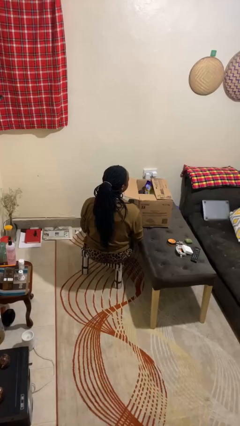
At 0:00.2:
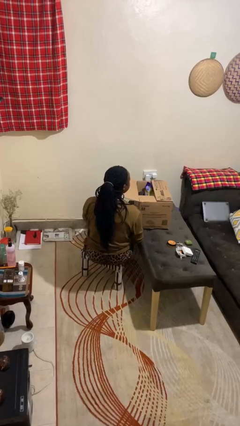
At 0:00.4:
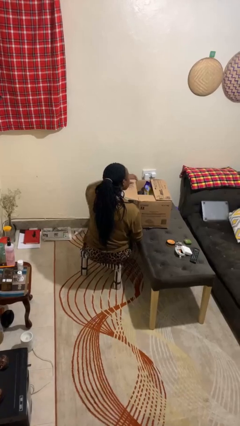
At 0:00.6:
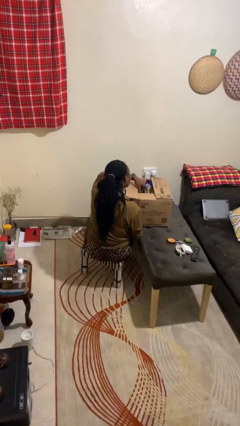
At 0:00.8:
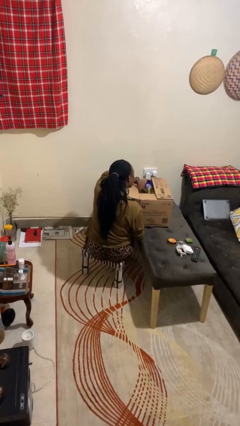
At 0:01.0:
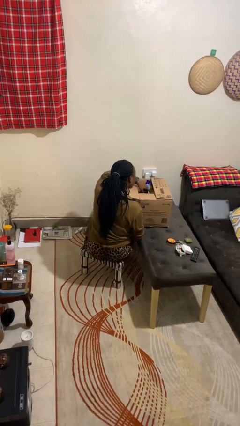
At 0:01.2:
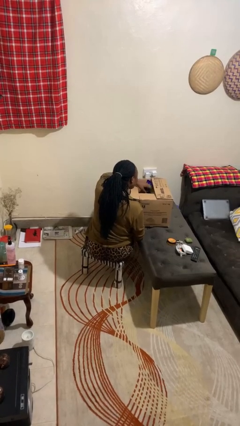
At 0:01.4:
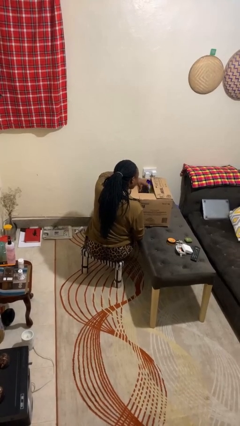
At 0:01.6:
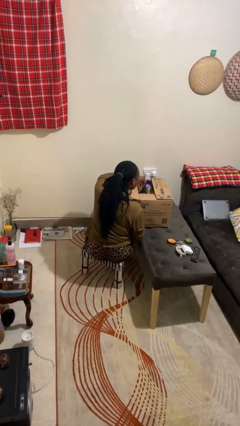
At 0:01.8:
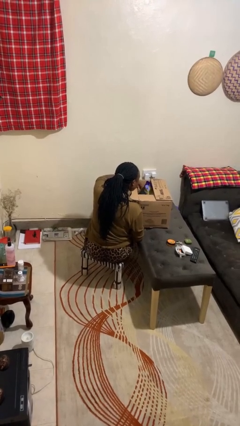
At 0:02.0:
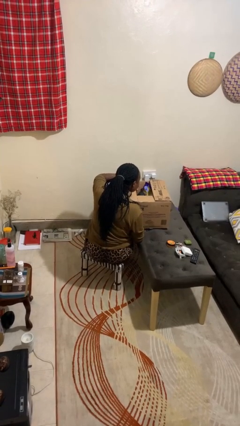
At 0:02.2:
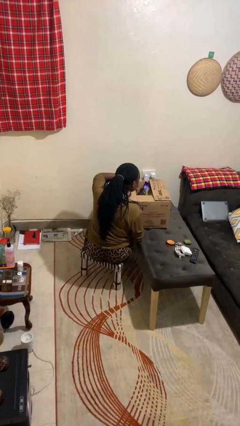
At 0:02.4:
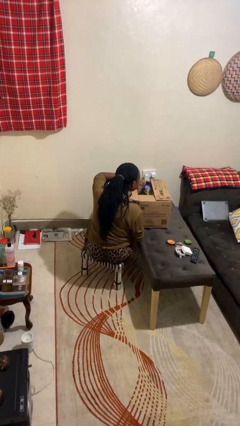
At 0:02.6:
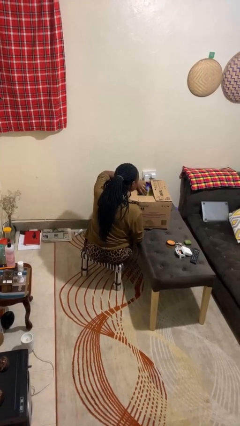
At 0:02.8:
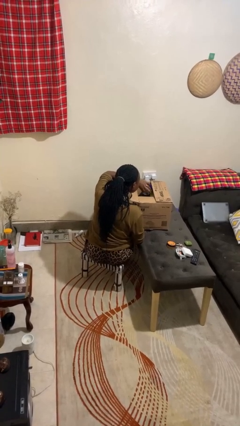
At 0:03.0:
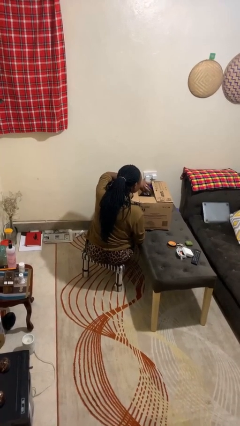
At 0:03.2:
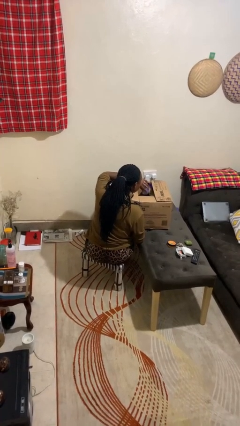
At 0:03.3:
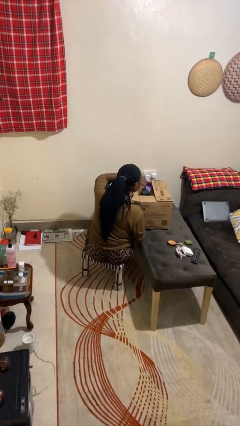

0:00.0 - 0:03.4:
person searches in box

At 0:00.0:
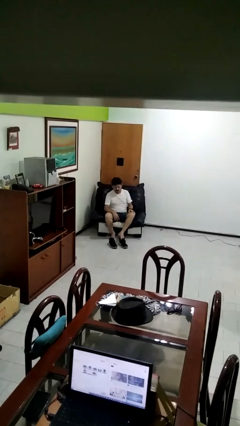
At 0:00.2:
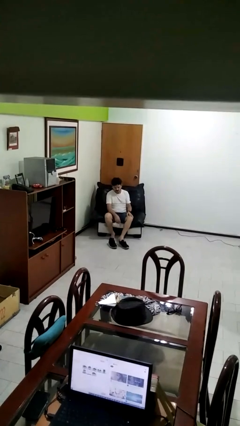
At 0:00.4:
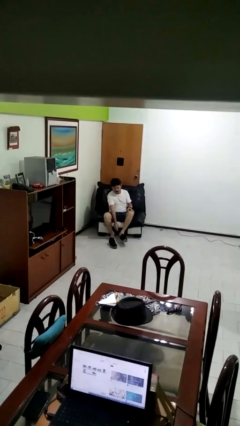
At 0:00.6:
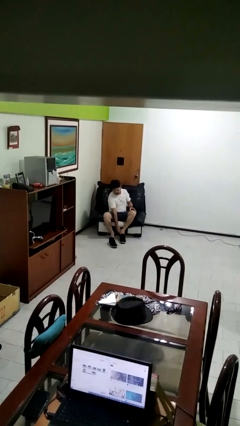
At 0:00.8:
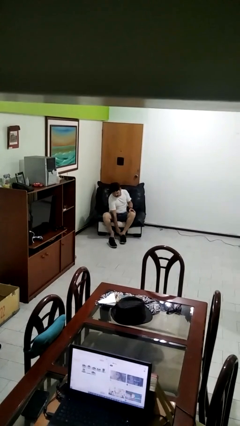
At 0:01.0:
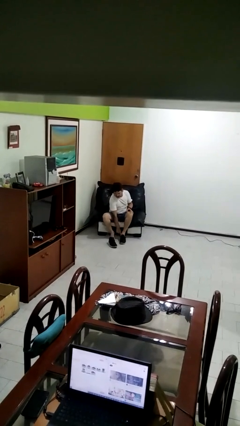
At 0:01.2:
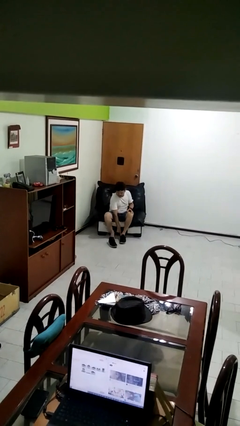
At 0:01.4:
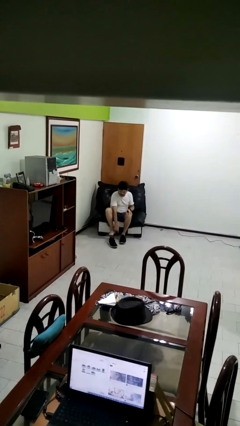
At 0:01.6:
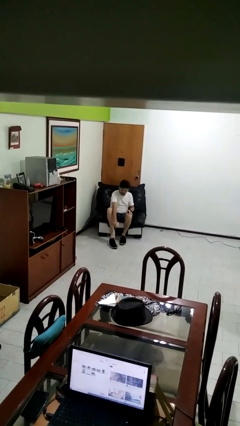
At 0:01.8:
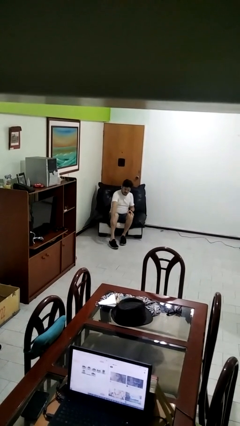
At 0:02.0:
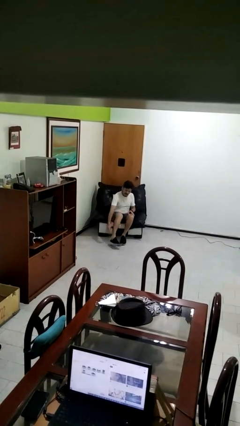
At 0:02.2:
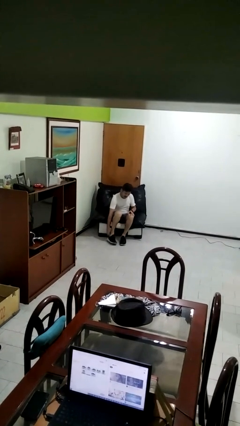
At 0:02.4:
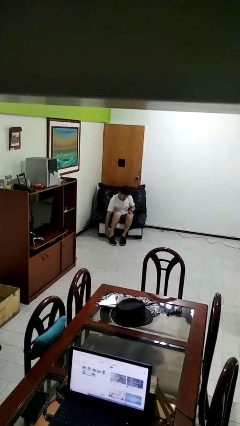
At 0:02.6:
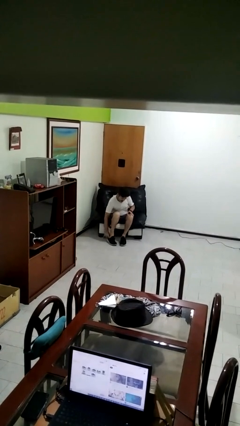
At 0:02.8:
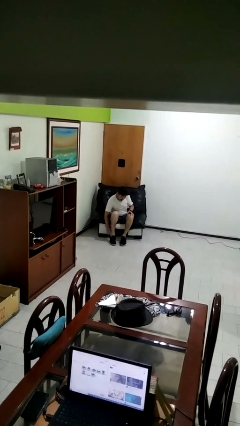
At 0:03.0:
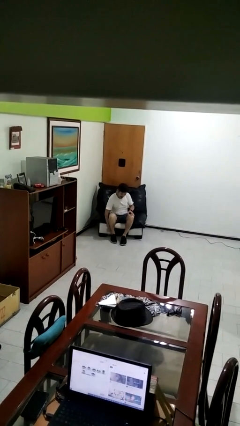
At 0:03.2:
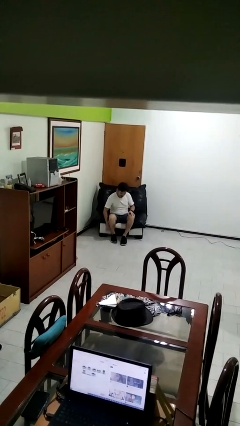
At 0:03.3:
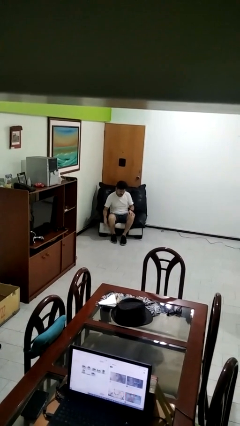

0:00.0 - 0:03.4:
person puts on shoes

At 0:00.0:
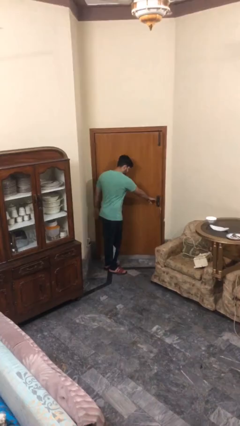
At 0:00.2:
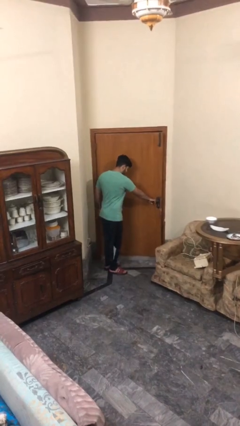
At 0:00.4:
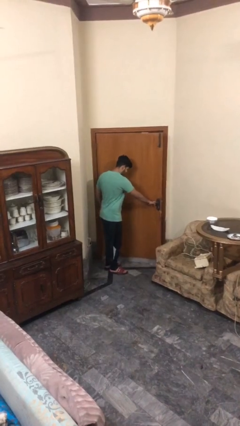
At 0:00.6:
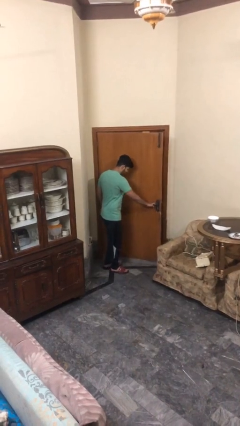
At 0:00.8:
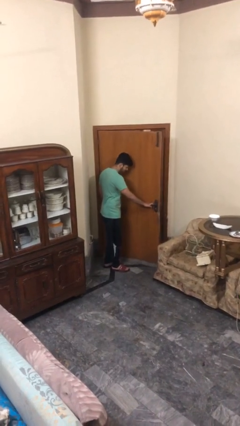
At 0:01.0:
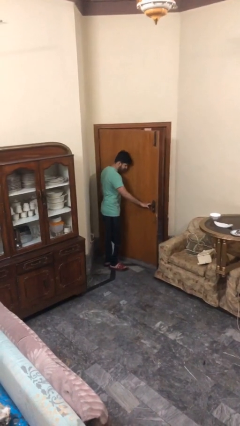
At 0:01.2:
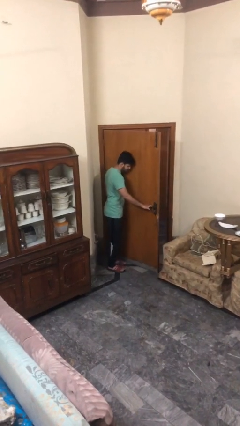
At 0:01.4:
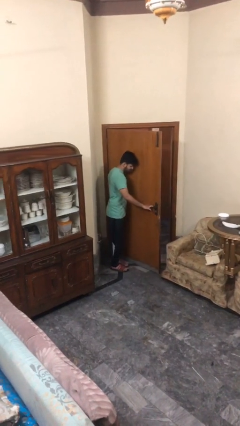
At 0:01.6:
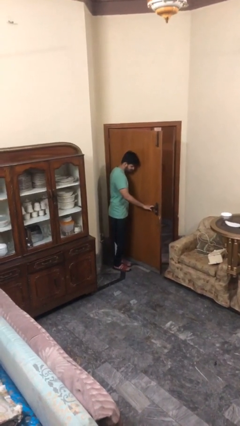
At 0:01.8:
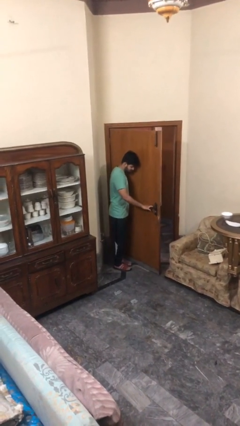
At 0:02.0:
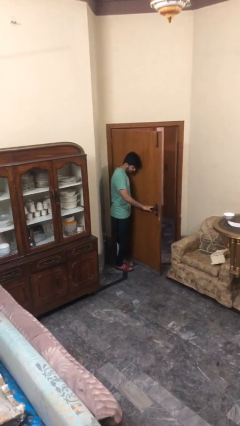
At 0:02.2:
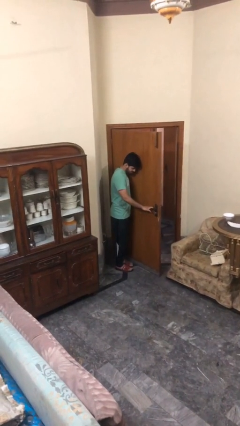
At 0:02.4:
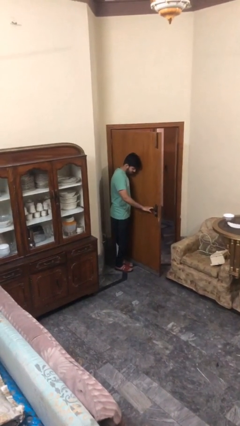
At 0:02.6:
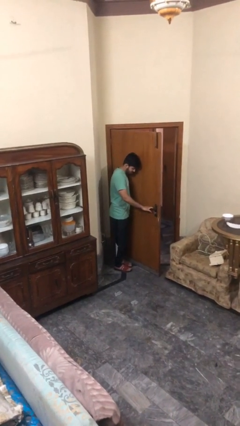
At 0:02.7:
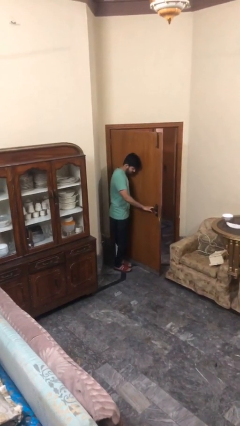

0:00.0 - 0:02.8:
person opens facility door

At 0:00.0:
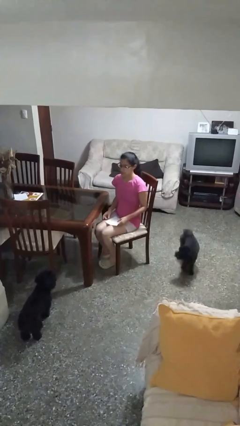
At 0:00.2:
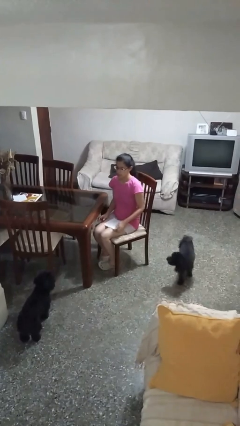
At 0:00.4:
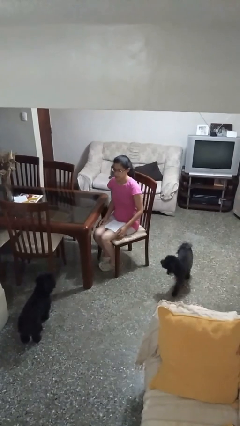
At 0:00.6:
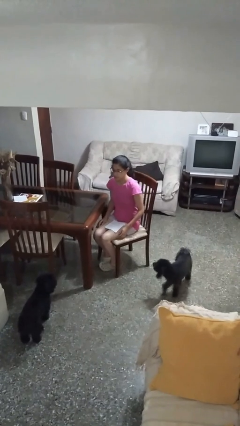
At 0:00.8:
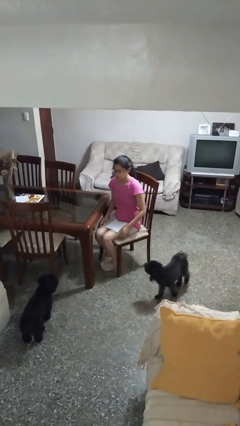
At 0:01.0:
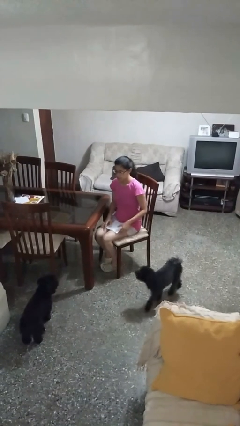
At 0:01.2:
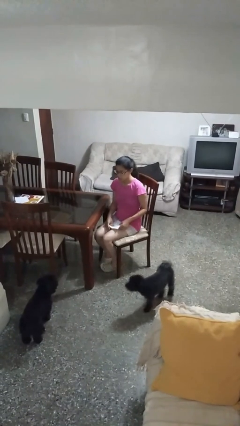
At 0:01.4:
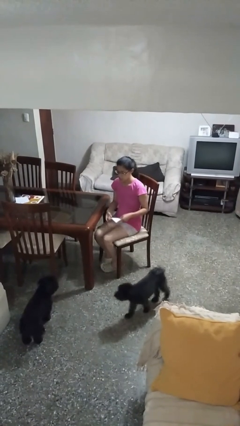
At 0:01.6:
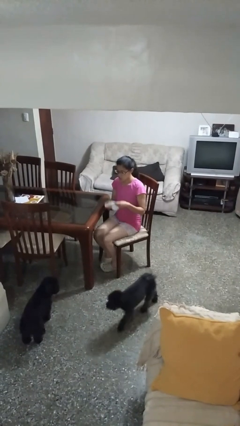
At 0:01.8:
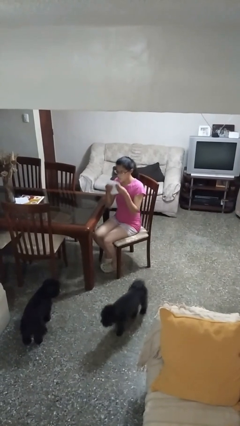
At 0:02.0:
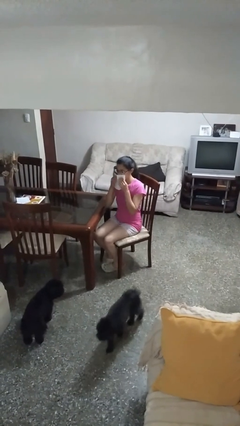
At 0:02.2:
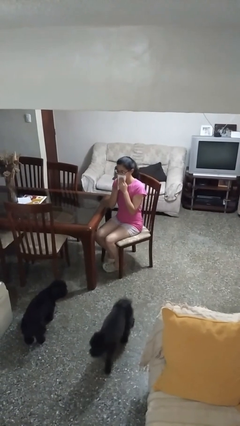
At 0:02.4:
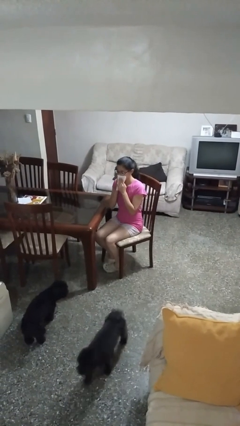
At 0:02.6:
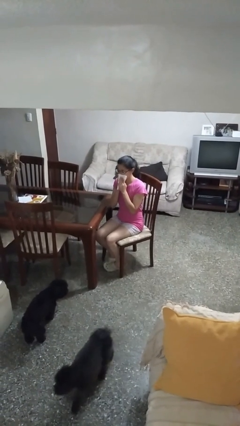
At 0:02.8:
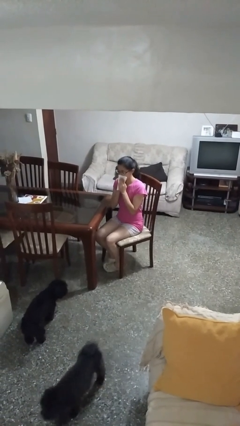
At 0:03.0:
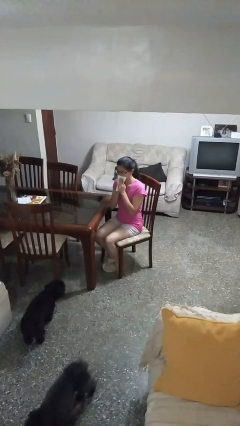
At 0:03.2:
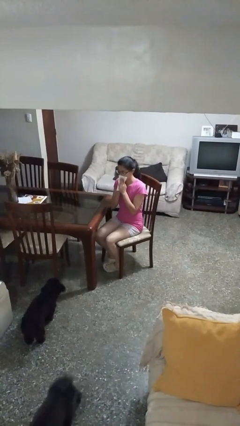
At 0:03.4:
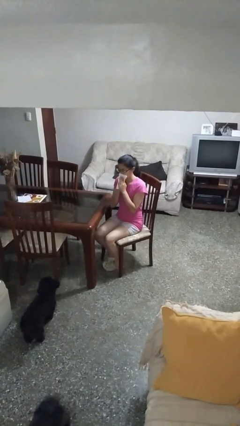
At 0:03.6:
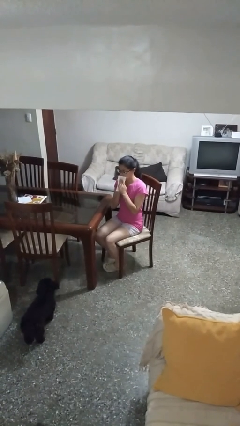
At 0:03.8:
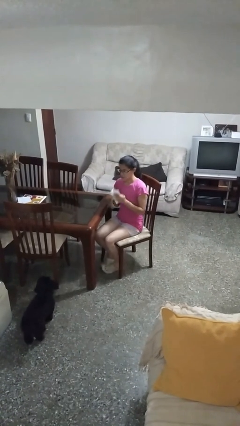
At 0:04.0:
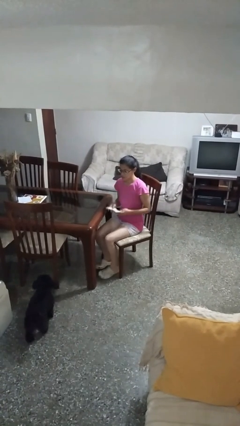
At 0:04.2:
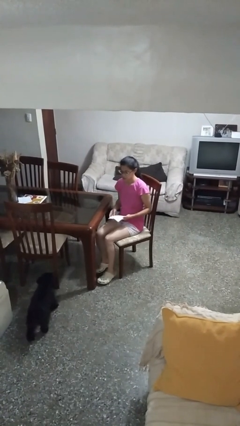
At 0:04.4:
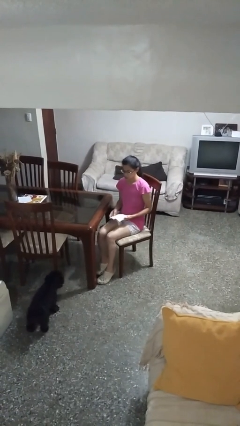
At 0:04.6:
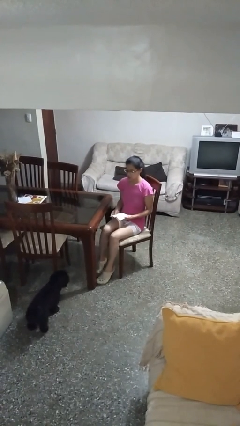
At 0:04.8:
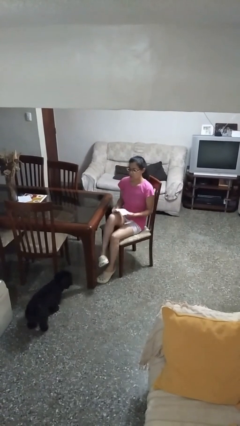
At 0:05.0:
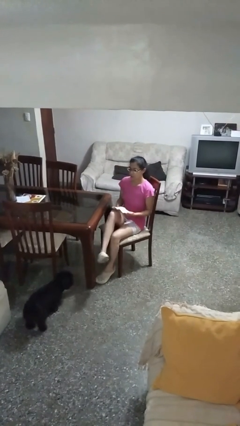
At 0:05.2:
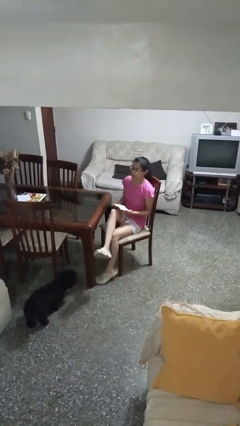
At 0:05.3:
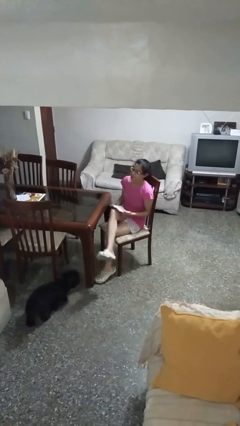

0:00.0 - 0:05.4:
person wipes mouth with napkin

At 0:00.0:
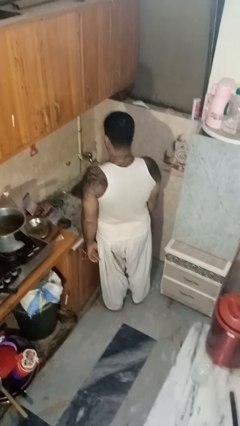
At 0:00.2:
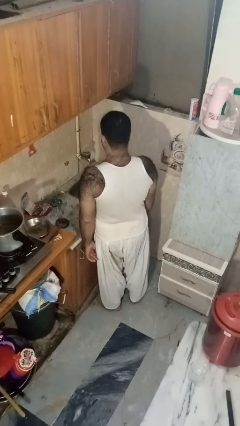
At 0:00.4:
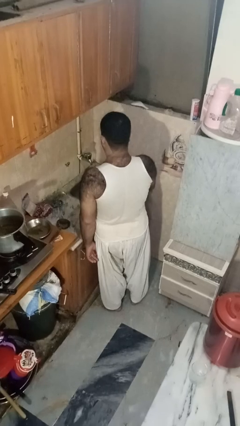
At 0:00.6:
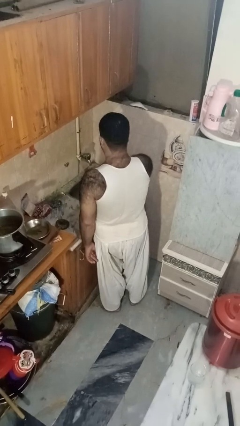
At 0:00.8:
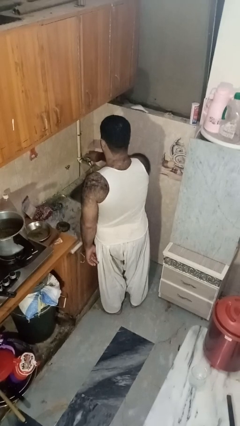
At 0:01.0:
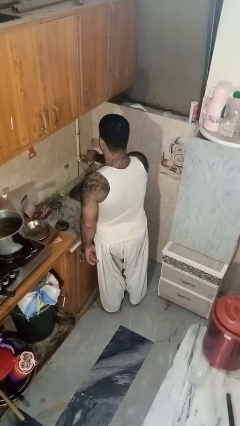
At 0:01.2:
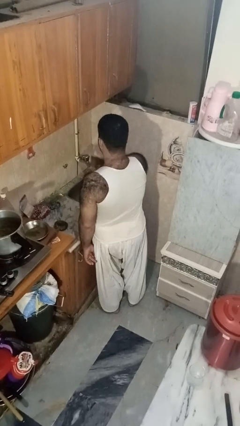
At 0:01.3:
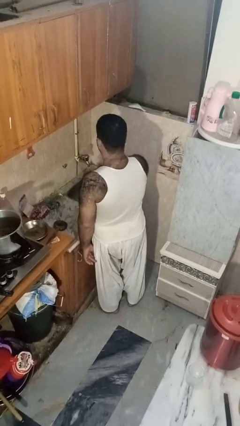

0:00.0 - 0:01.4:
person turns off faucet

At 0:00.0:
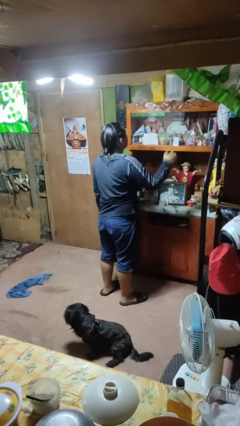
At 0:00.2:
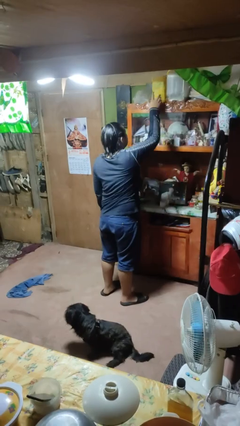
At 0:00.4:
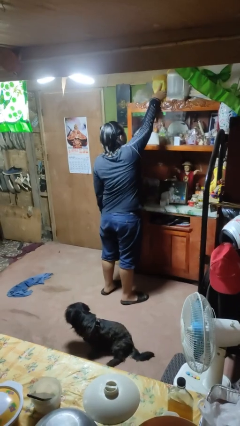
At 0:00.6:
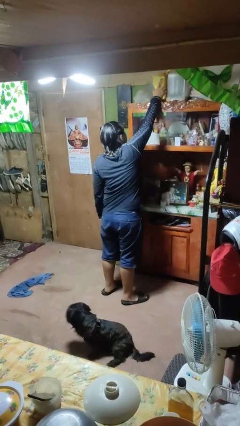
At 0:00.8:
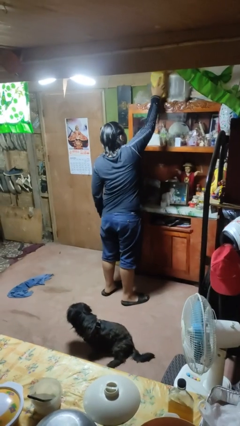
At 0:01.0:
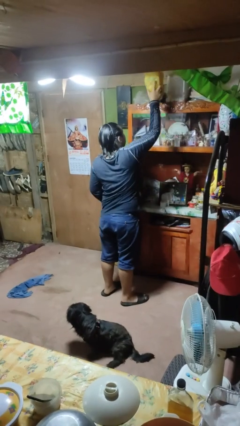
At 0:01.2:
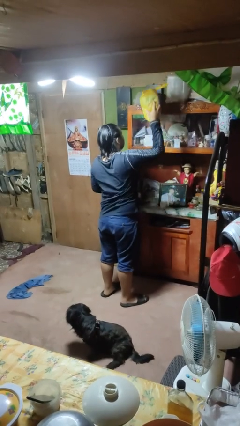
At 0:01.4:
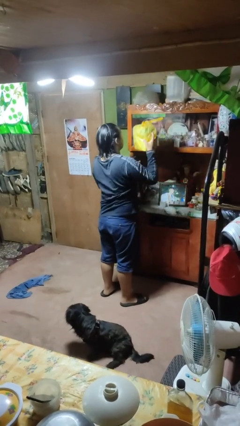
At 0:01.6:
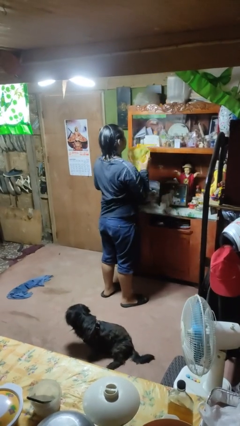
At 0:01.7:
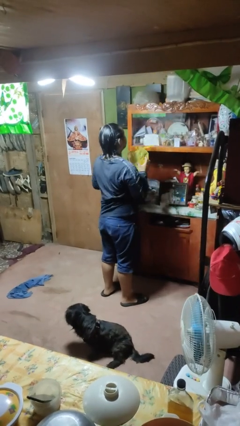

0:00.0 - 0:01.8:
person picks up object from shelf
